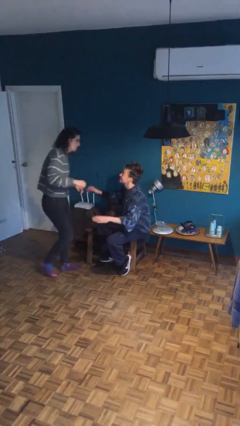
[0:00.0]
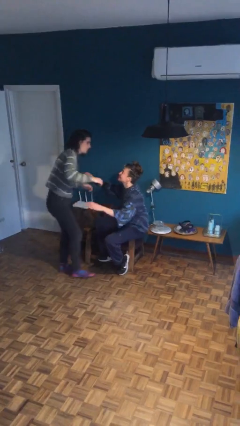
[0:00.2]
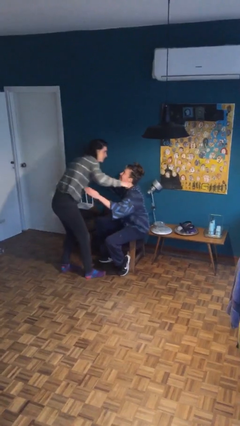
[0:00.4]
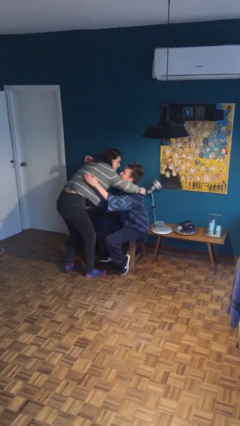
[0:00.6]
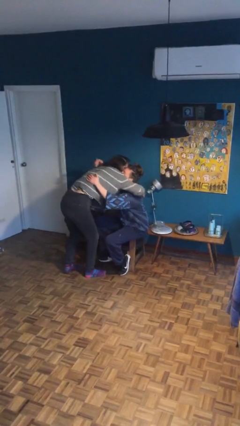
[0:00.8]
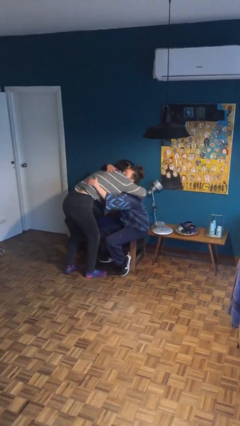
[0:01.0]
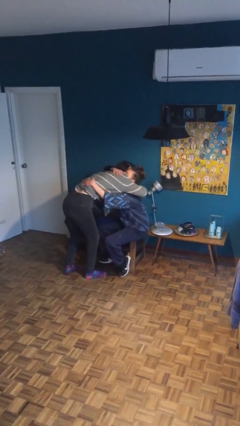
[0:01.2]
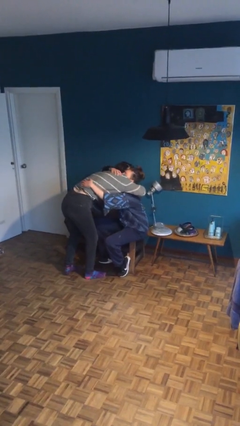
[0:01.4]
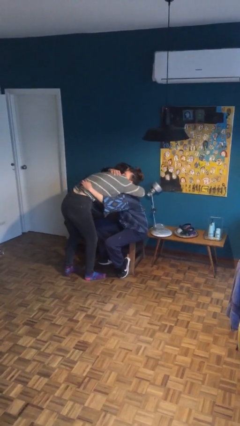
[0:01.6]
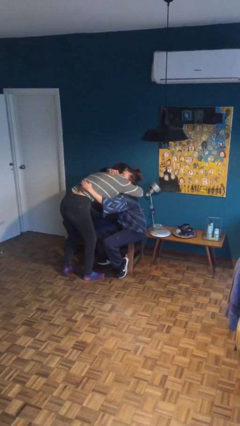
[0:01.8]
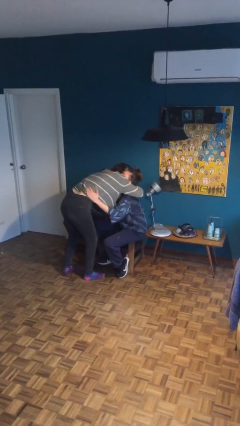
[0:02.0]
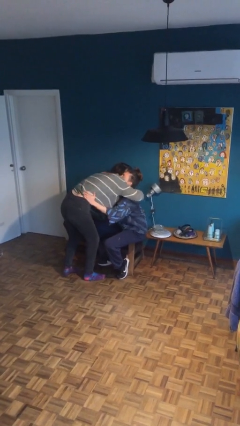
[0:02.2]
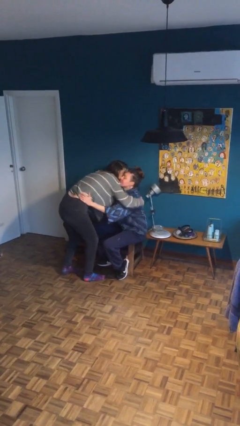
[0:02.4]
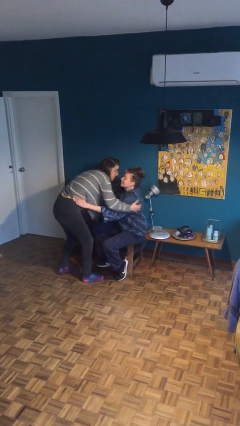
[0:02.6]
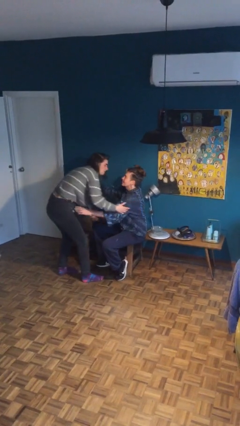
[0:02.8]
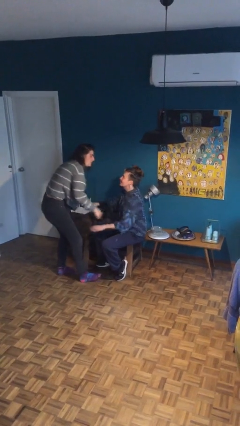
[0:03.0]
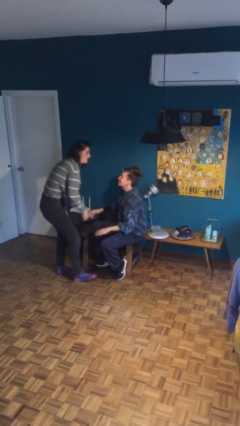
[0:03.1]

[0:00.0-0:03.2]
person embraces person

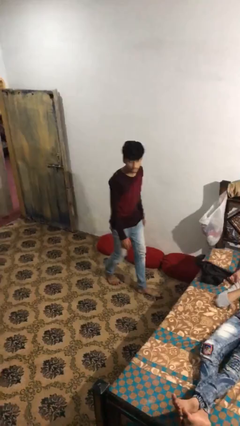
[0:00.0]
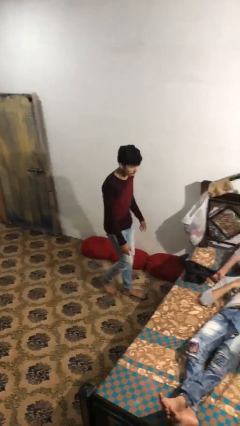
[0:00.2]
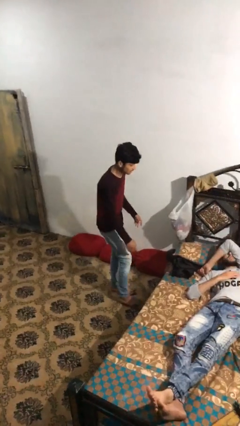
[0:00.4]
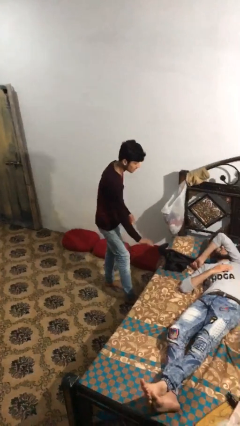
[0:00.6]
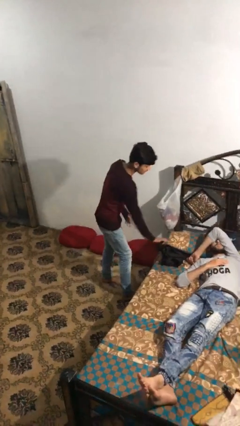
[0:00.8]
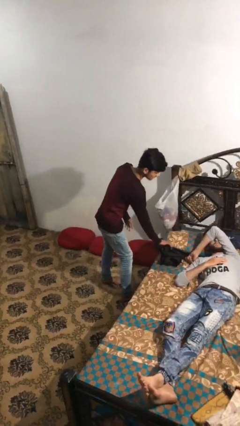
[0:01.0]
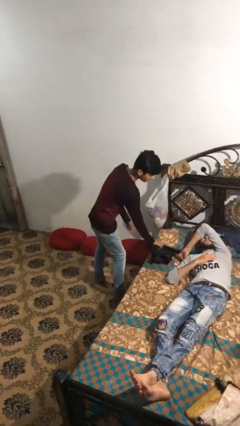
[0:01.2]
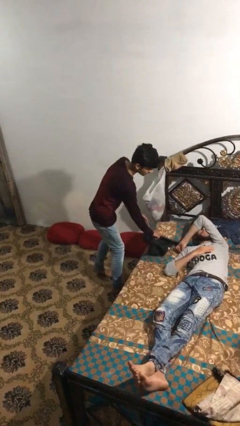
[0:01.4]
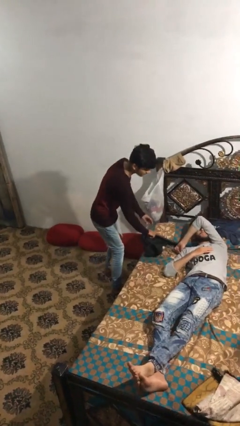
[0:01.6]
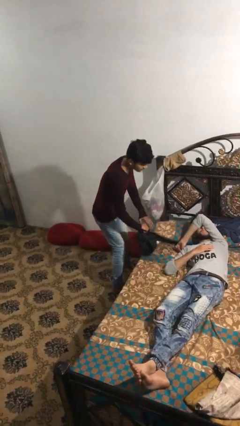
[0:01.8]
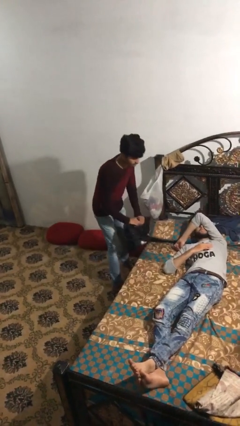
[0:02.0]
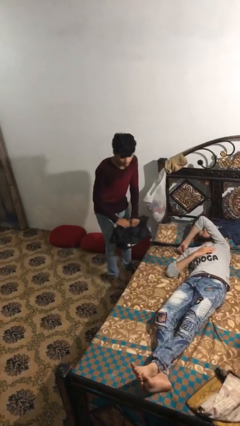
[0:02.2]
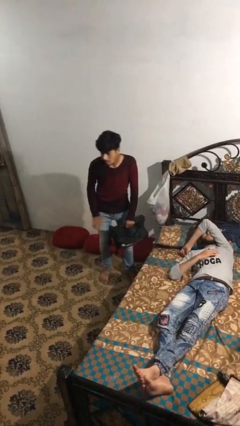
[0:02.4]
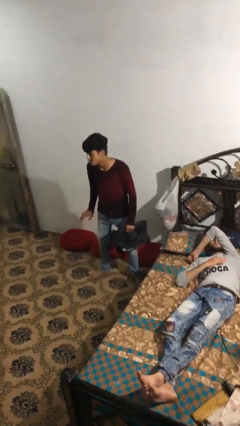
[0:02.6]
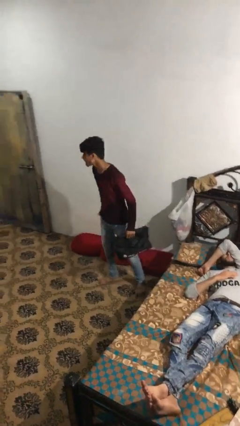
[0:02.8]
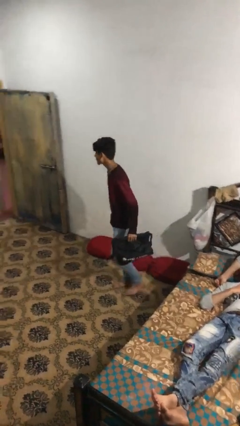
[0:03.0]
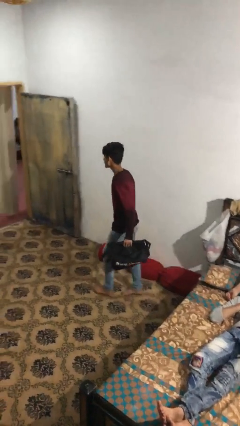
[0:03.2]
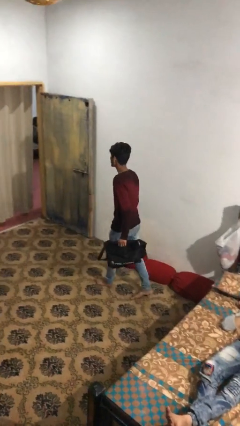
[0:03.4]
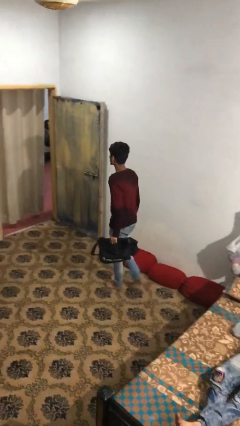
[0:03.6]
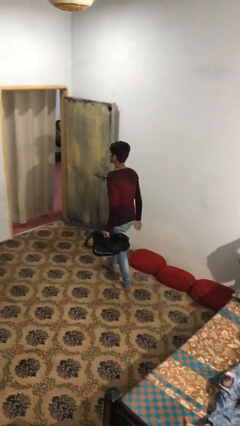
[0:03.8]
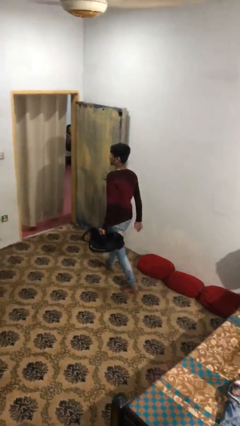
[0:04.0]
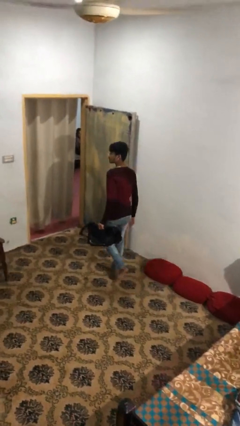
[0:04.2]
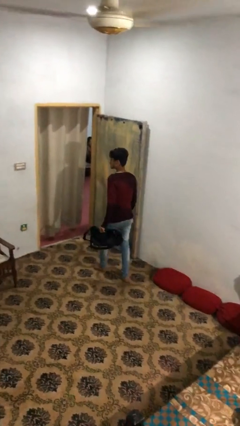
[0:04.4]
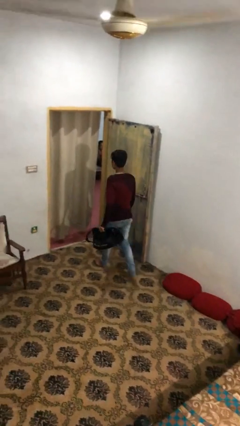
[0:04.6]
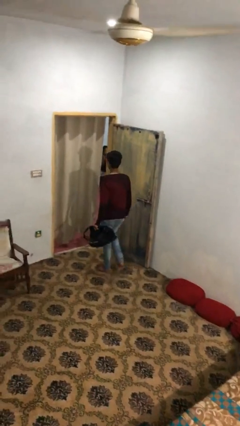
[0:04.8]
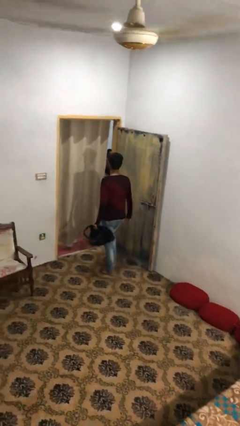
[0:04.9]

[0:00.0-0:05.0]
person steals object from person

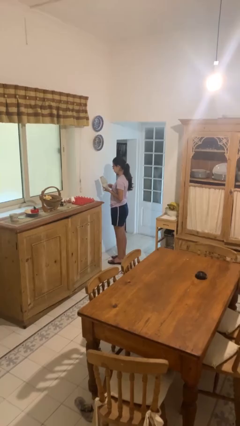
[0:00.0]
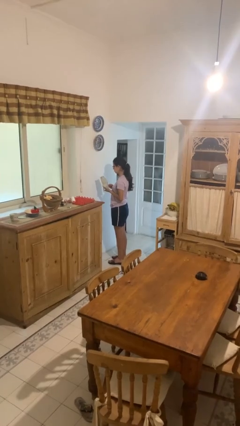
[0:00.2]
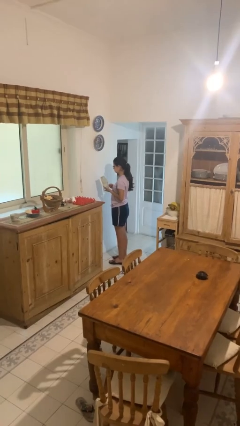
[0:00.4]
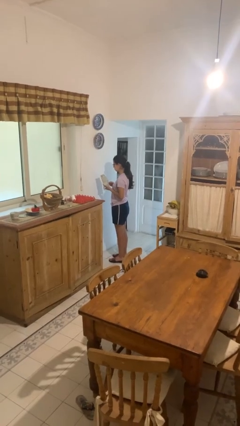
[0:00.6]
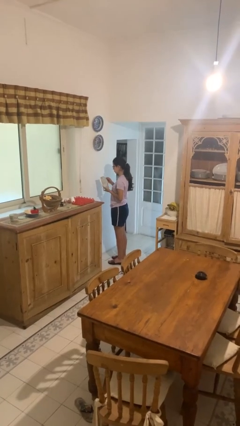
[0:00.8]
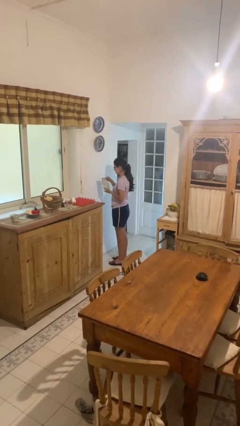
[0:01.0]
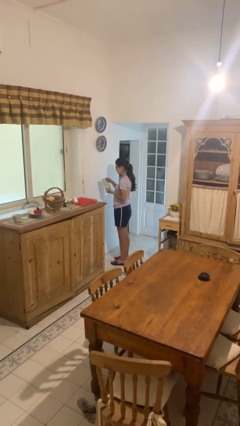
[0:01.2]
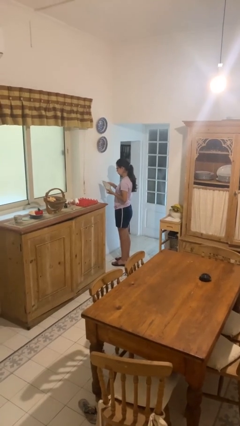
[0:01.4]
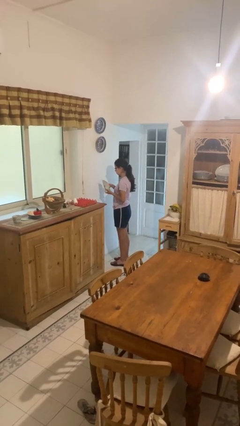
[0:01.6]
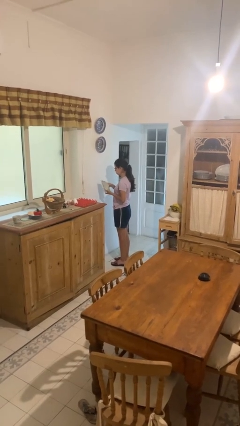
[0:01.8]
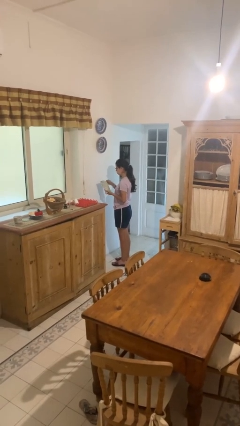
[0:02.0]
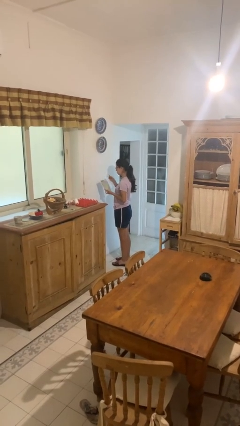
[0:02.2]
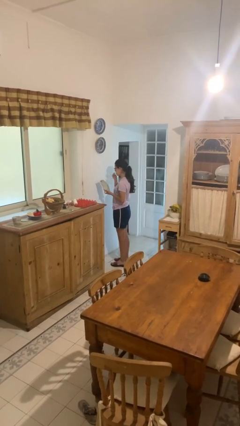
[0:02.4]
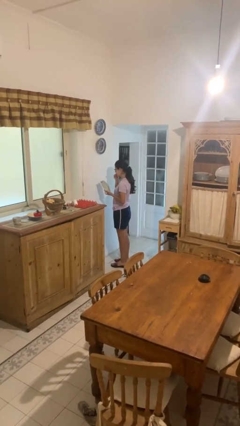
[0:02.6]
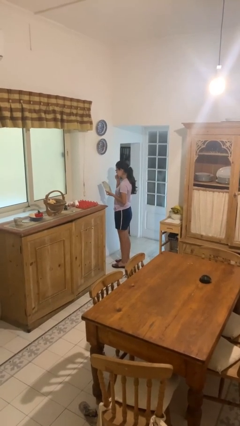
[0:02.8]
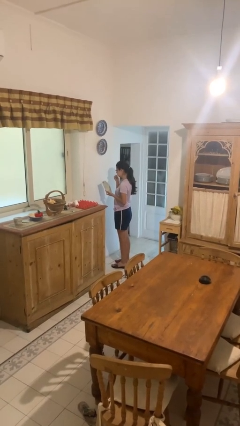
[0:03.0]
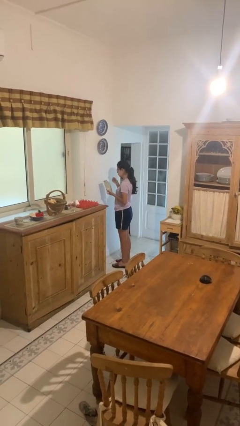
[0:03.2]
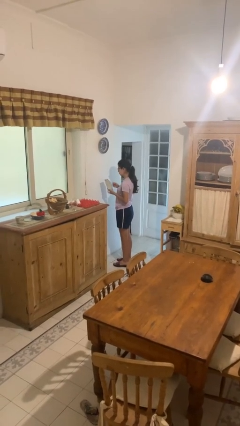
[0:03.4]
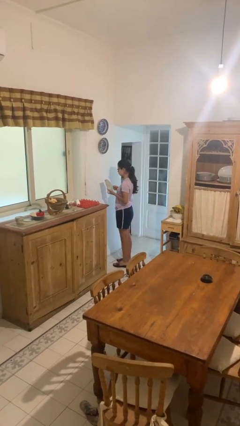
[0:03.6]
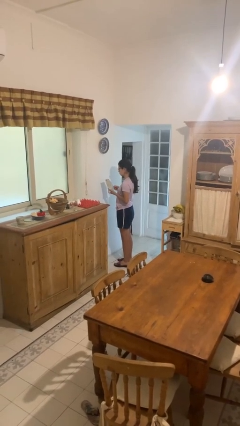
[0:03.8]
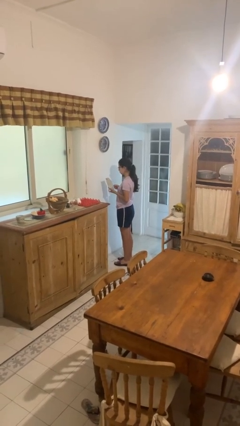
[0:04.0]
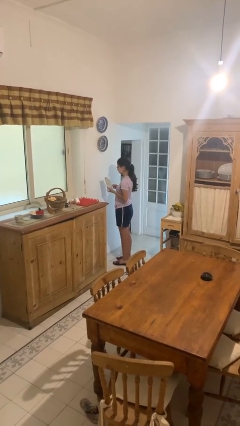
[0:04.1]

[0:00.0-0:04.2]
person eats snack from bag

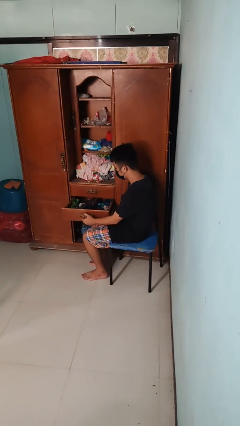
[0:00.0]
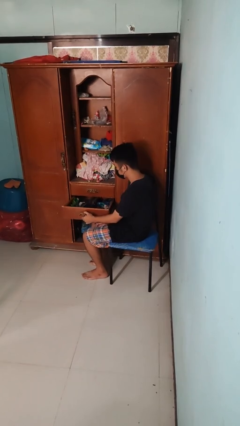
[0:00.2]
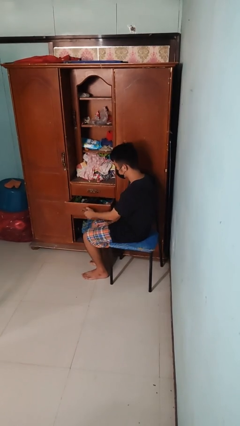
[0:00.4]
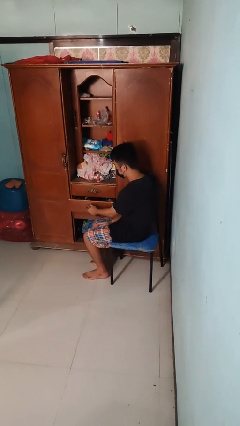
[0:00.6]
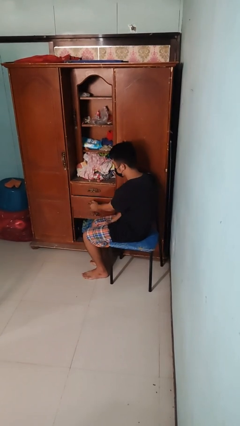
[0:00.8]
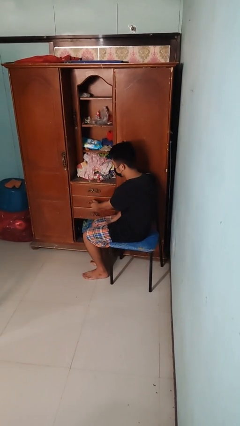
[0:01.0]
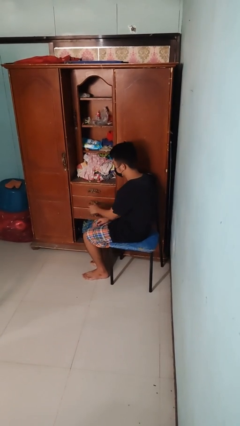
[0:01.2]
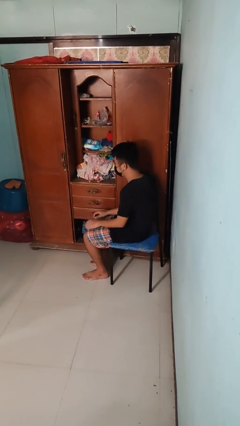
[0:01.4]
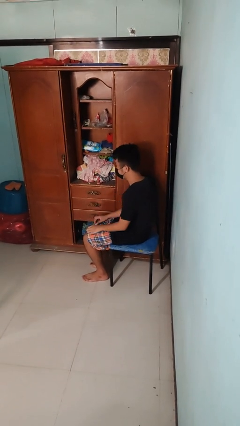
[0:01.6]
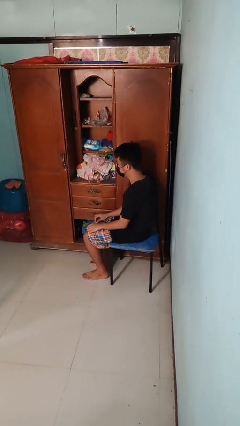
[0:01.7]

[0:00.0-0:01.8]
person closes dresser drawer

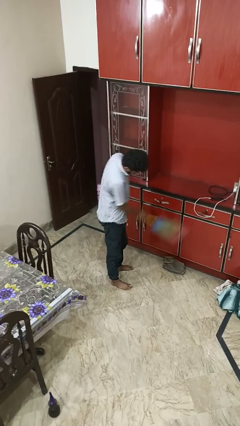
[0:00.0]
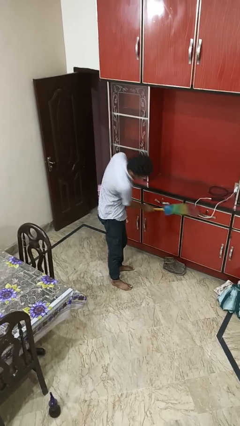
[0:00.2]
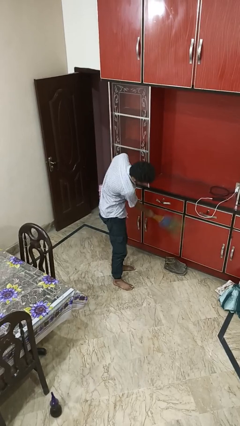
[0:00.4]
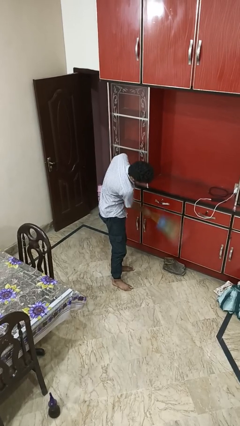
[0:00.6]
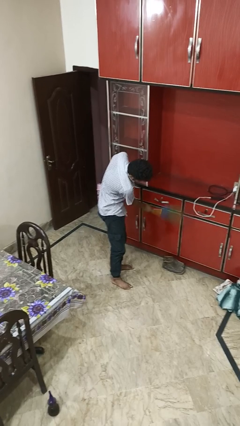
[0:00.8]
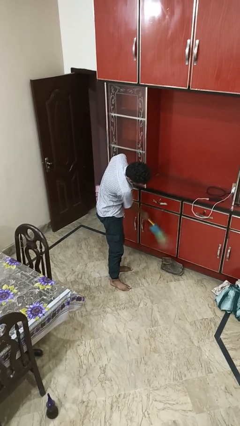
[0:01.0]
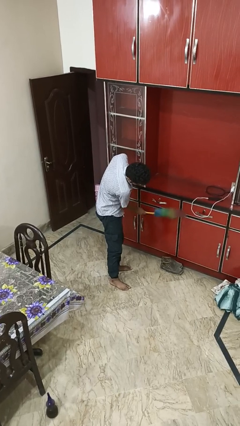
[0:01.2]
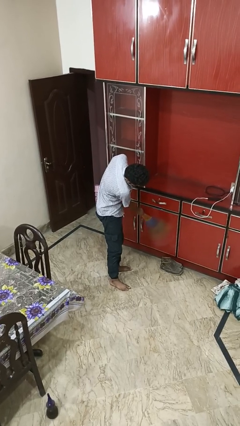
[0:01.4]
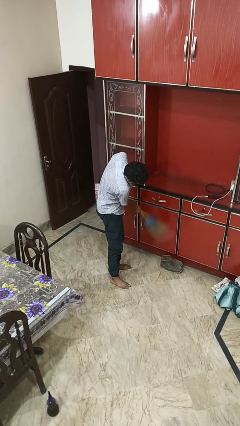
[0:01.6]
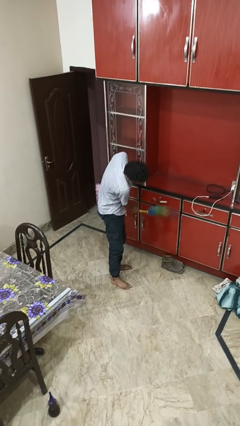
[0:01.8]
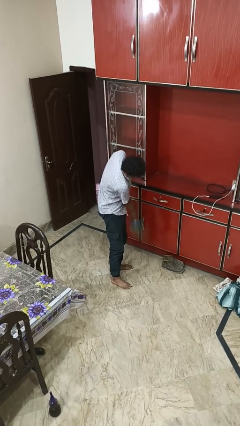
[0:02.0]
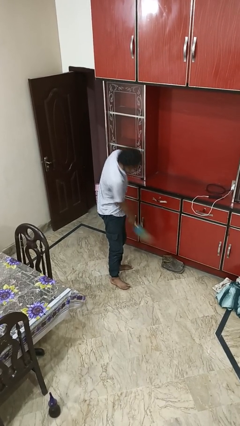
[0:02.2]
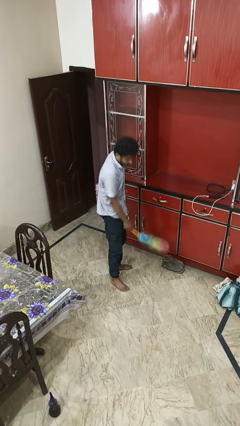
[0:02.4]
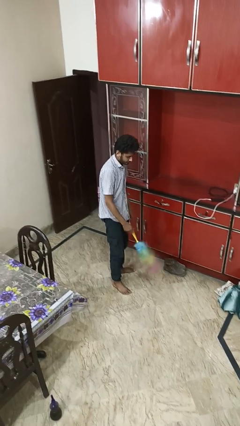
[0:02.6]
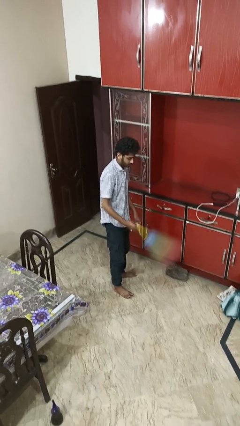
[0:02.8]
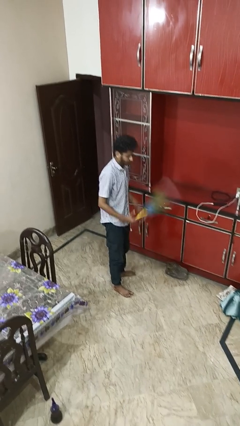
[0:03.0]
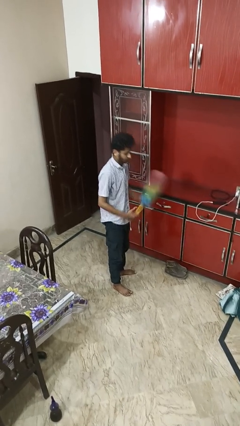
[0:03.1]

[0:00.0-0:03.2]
person dusts furniture
